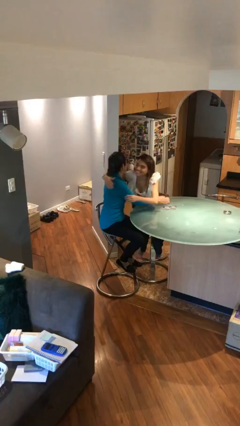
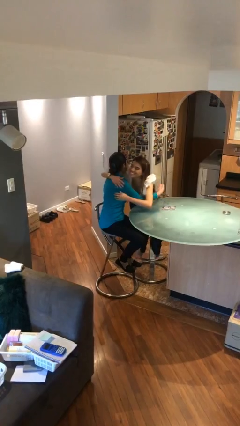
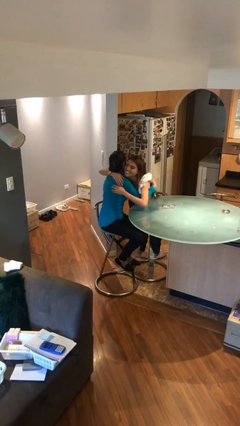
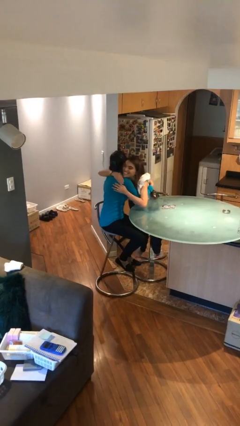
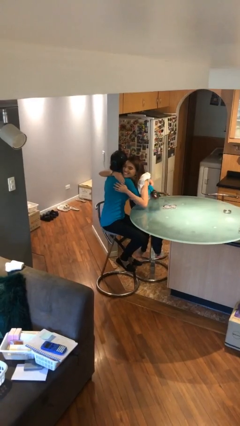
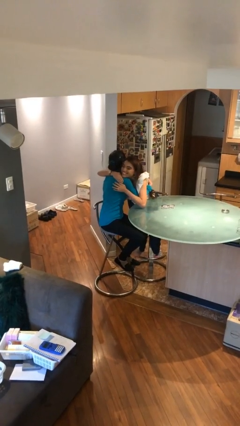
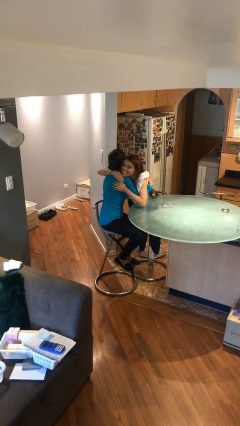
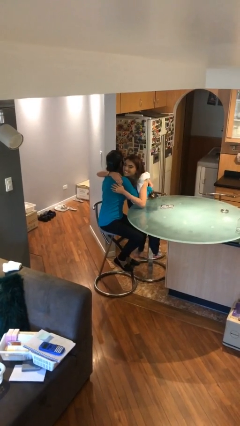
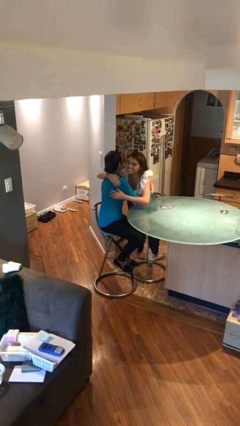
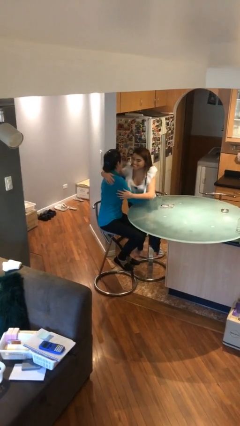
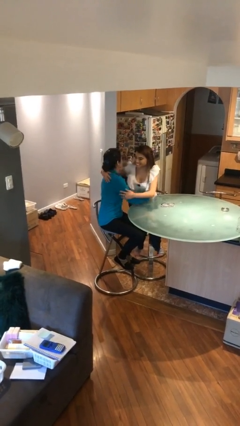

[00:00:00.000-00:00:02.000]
person embraces person

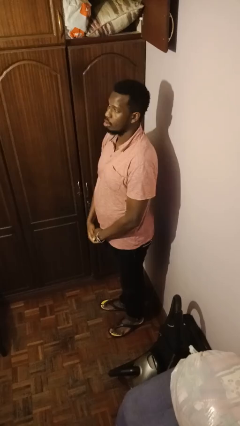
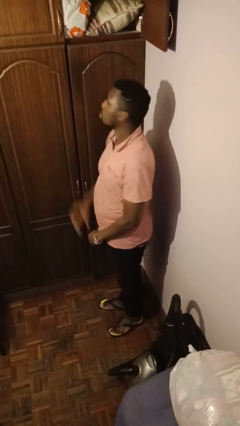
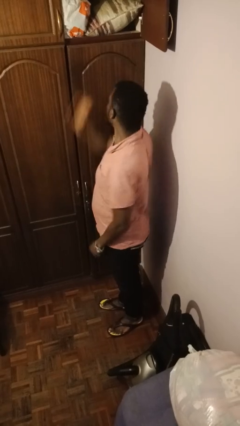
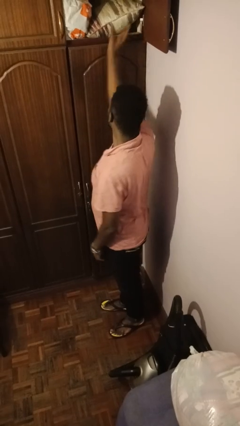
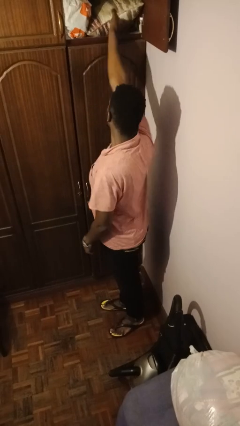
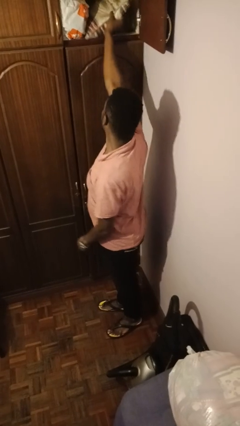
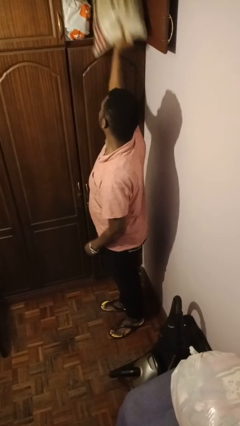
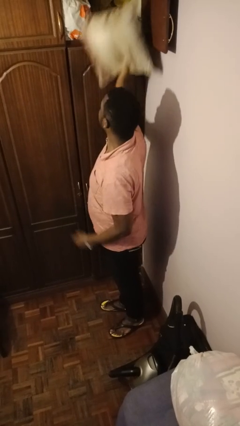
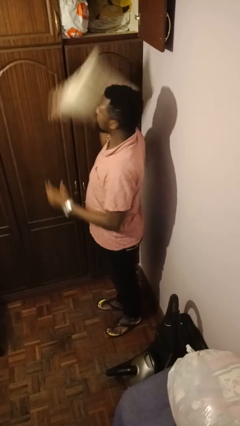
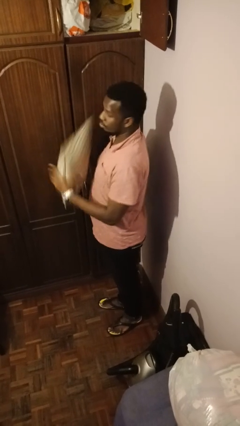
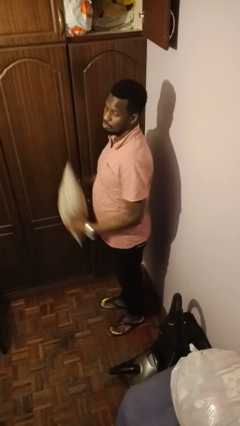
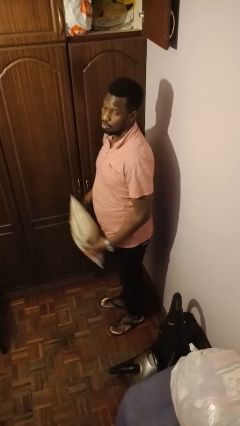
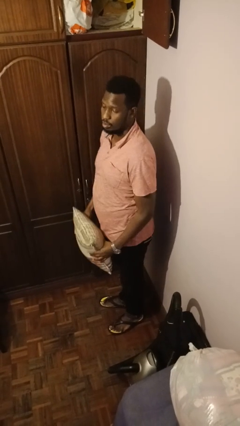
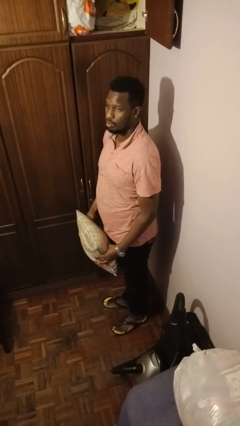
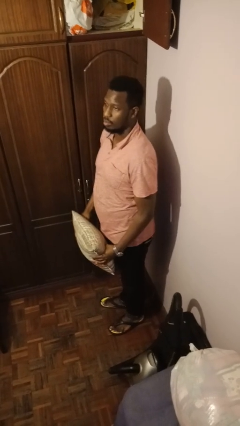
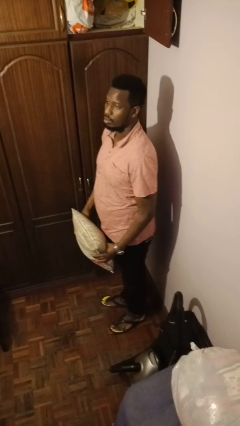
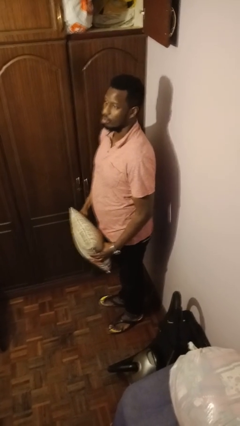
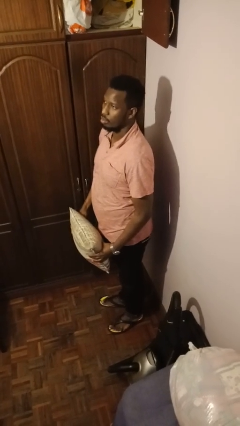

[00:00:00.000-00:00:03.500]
person picks up object from shelf

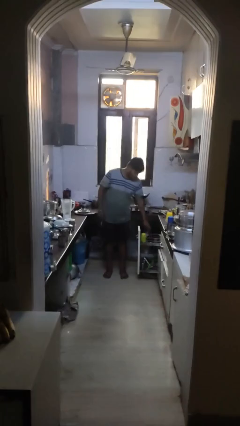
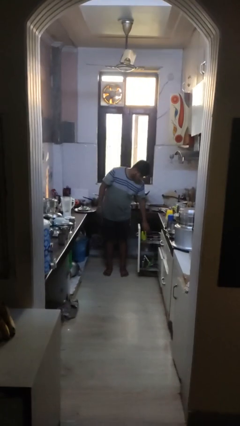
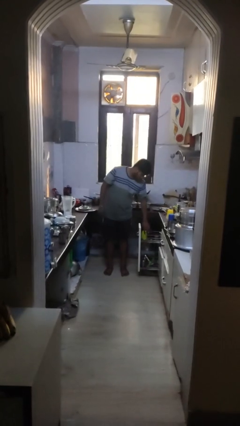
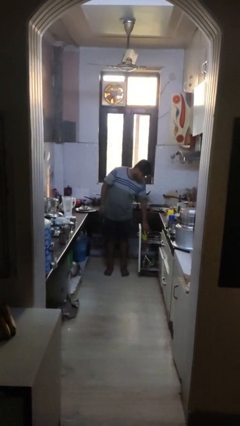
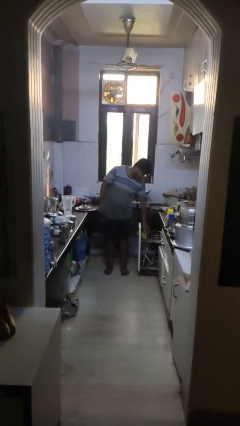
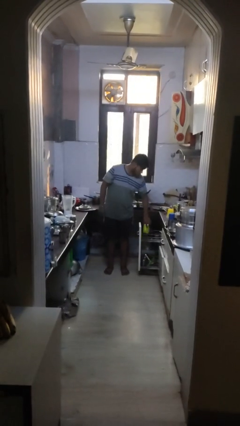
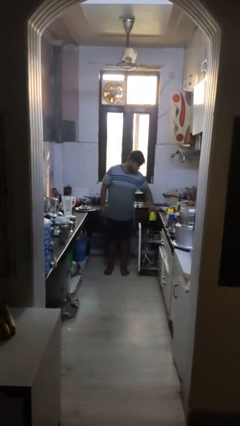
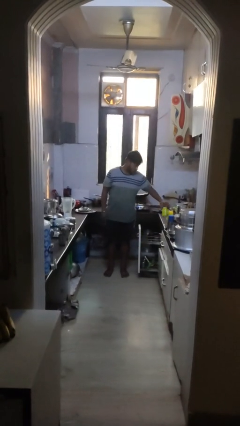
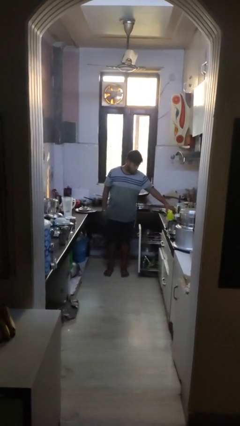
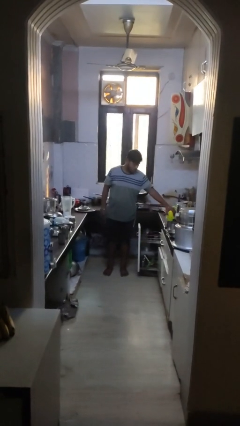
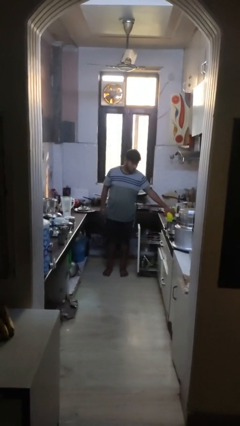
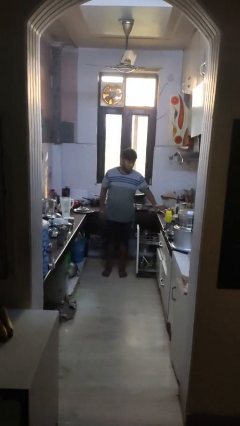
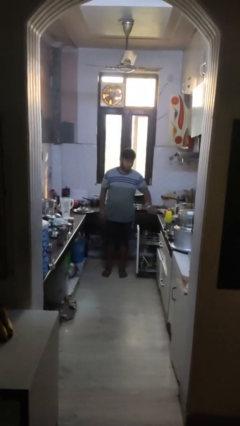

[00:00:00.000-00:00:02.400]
person unloads dishwasher

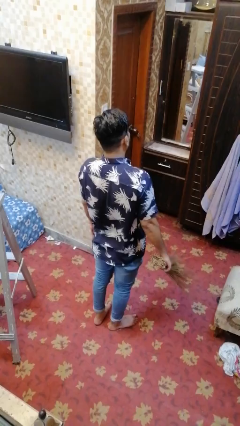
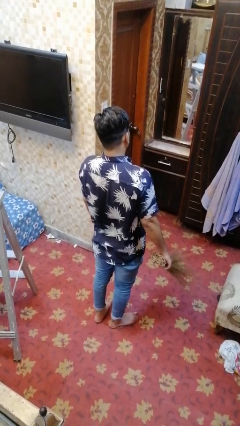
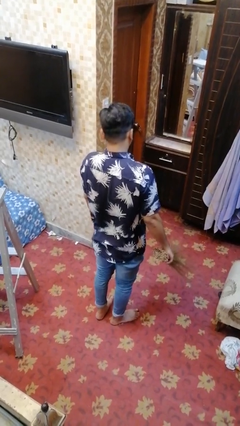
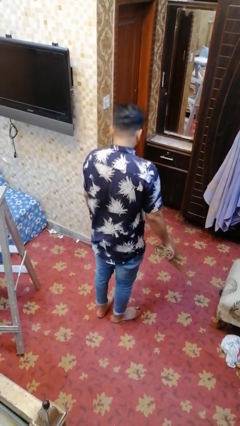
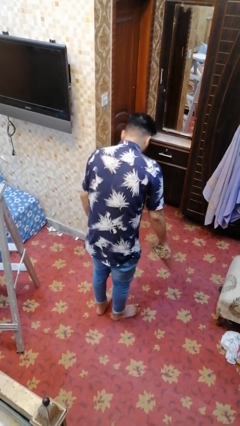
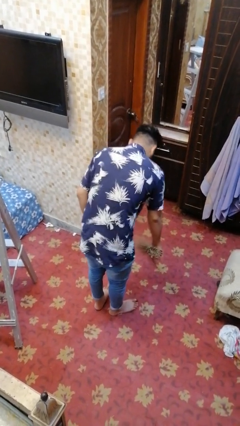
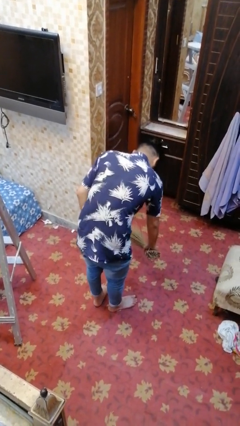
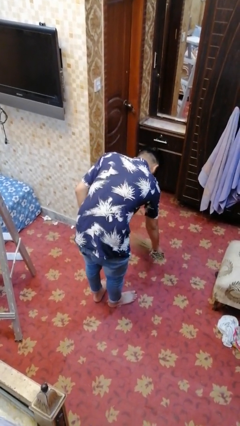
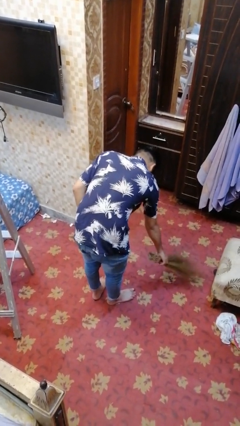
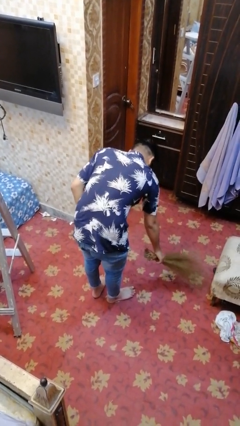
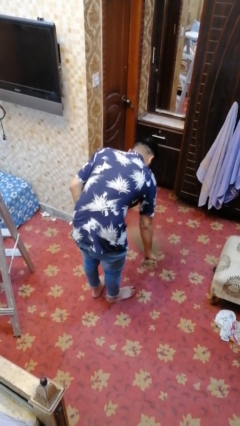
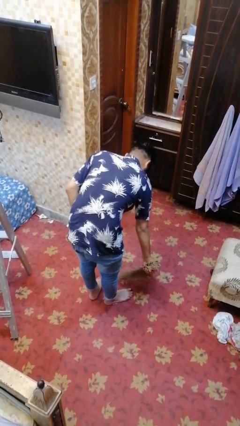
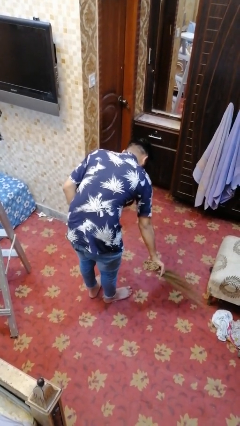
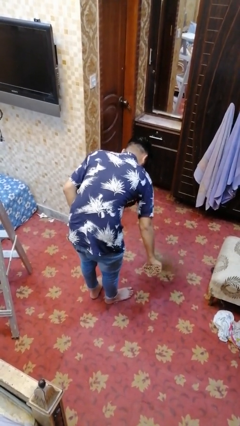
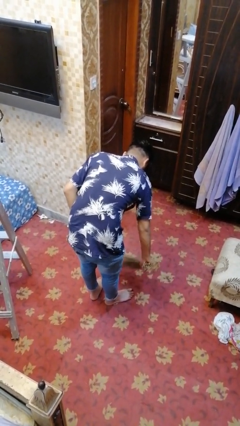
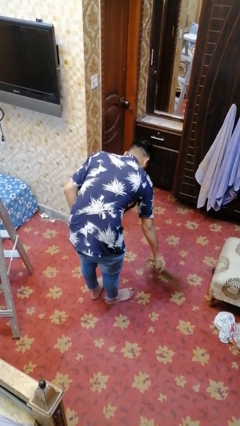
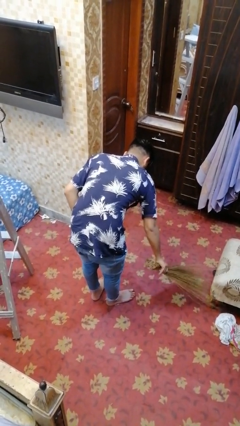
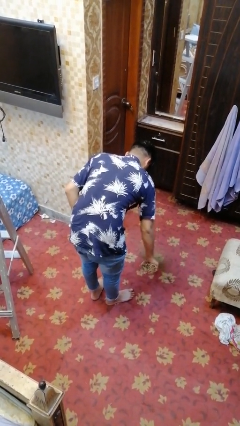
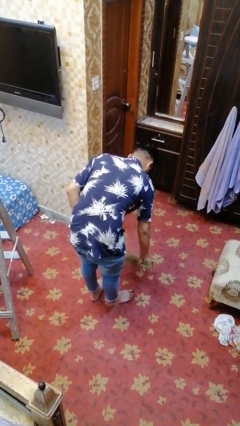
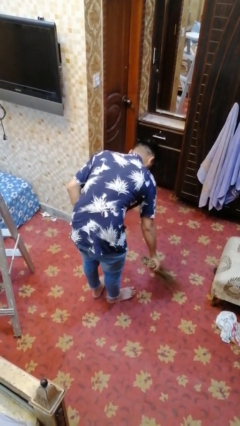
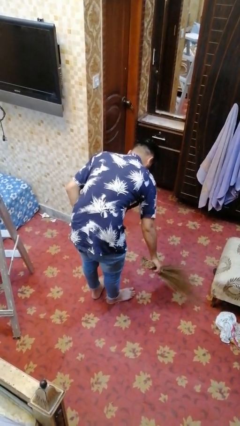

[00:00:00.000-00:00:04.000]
person sweeps floor

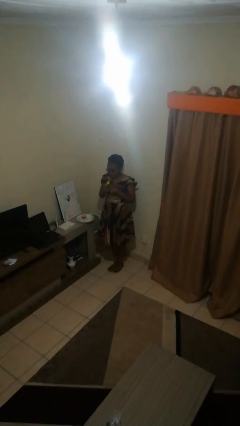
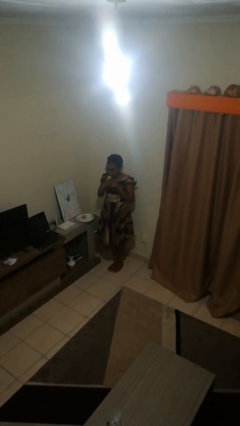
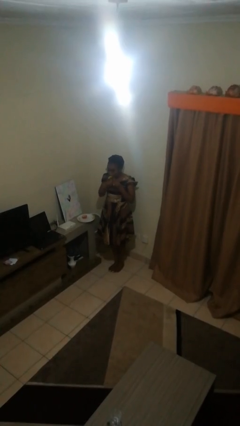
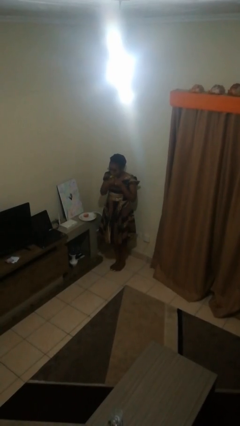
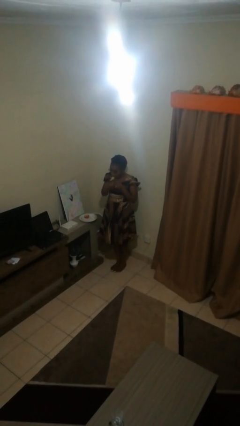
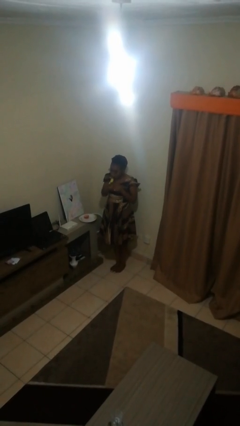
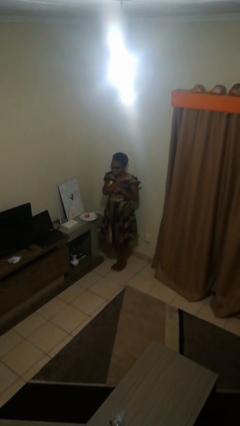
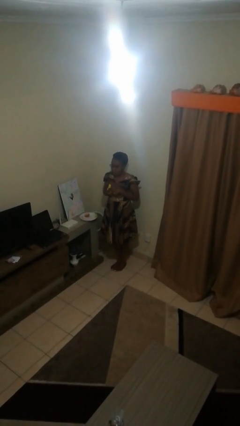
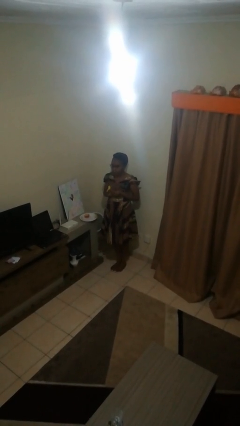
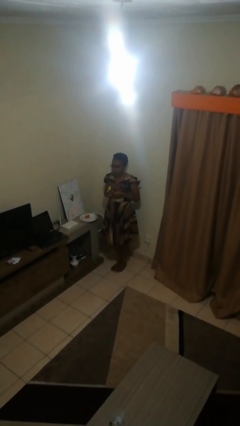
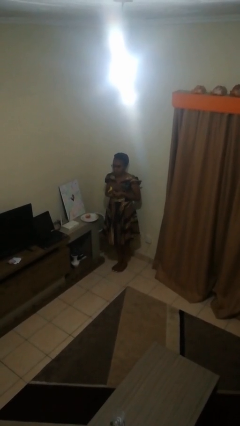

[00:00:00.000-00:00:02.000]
person eats banana

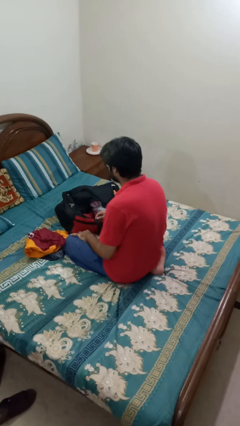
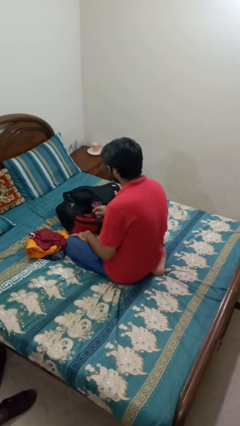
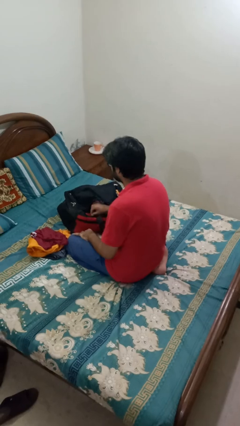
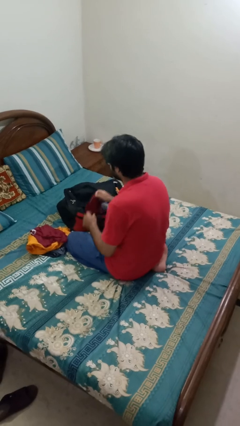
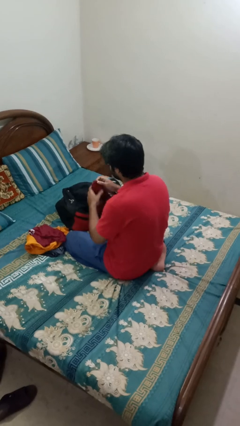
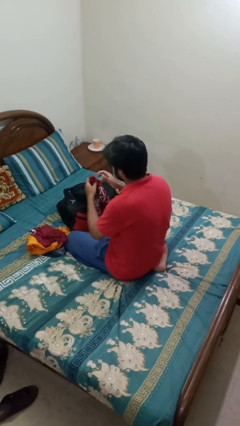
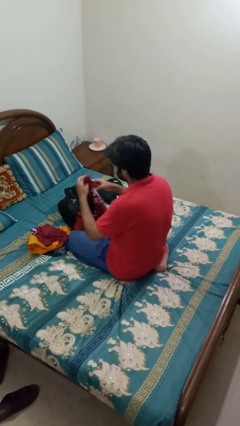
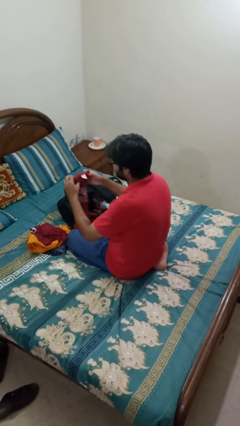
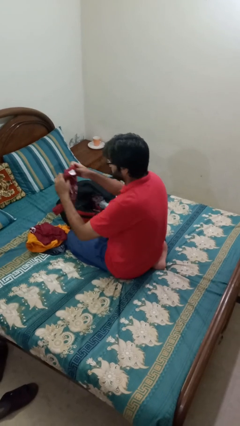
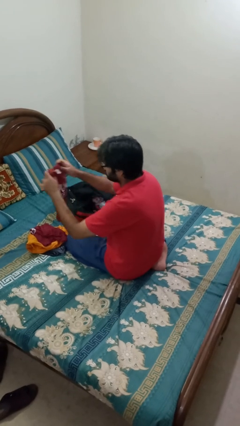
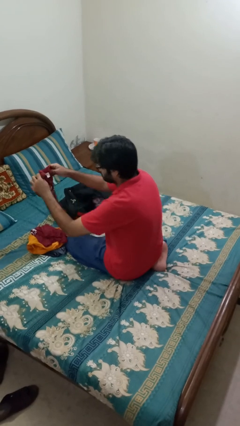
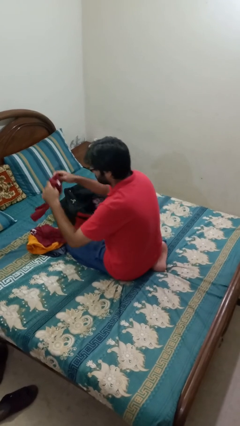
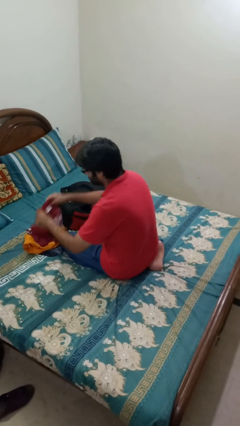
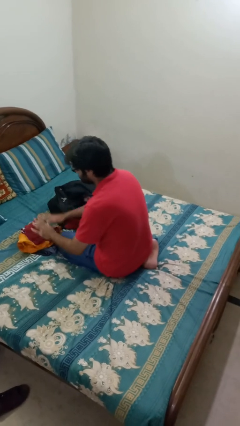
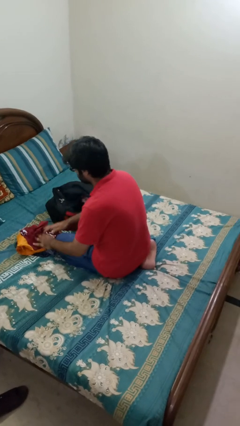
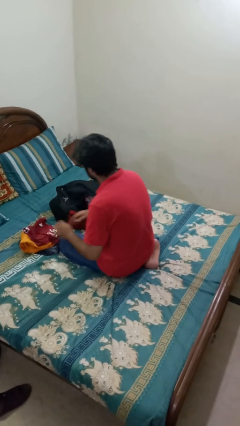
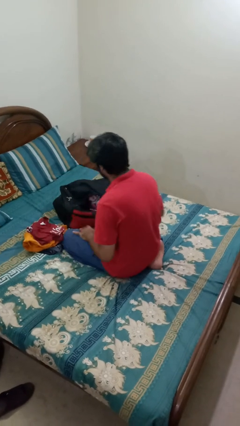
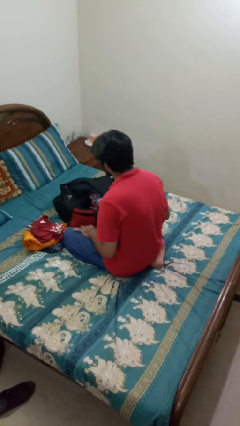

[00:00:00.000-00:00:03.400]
person unloads clothes from suitcase

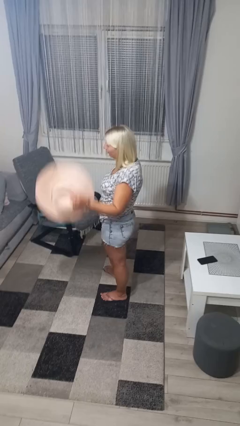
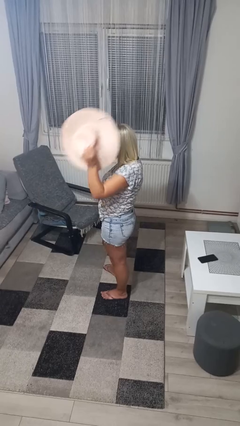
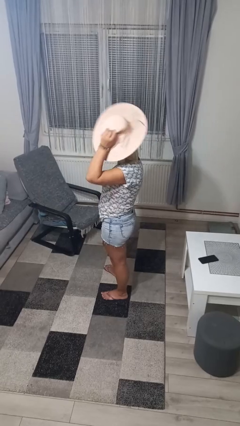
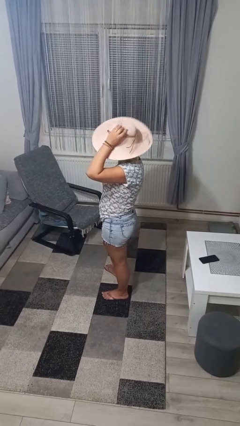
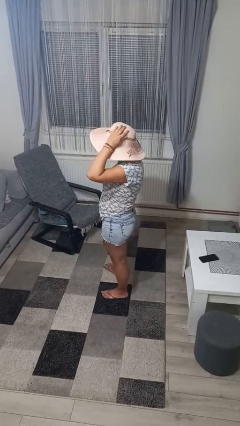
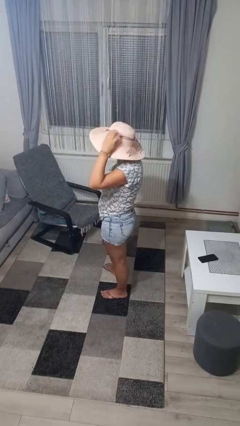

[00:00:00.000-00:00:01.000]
person puts on hat
